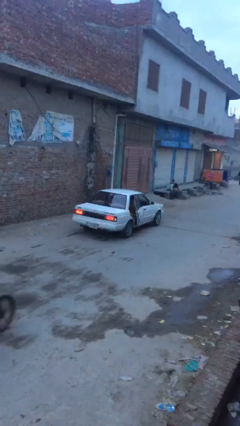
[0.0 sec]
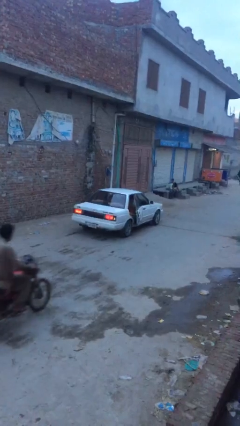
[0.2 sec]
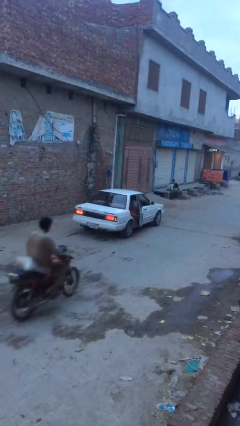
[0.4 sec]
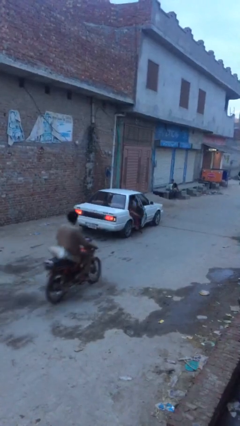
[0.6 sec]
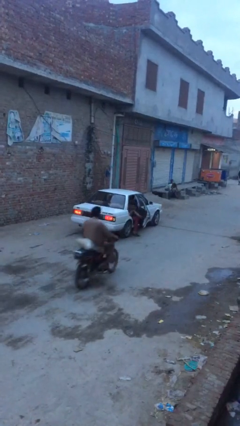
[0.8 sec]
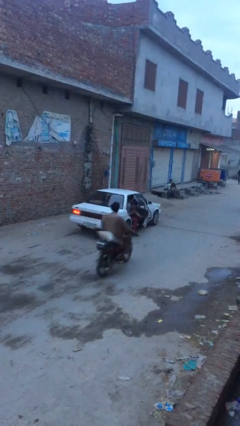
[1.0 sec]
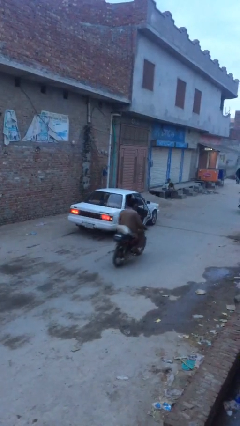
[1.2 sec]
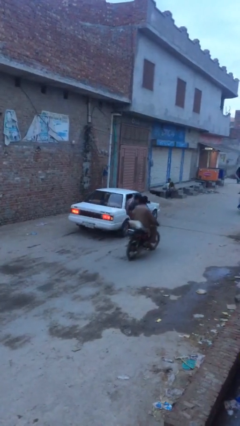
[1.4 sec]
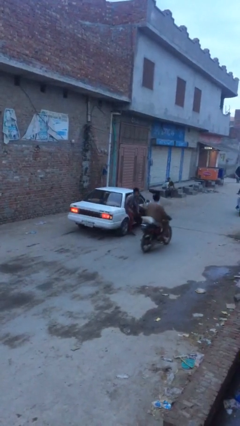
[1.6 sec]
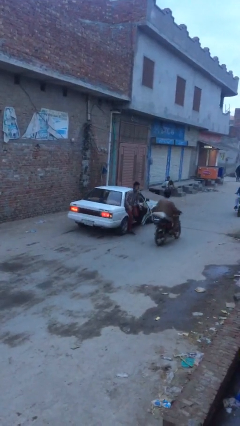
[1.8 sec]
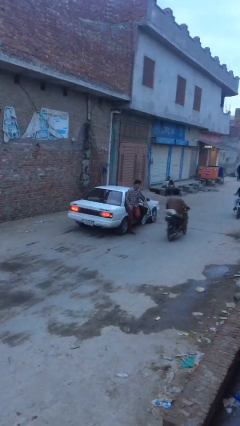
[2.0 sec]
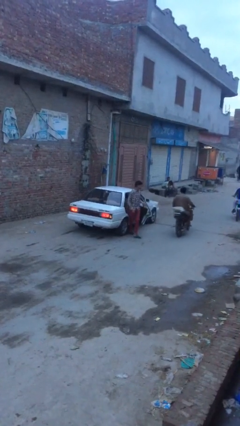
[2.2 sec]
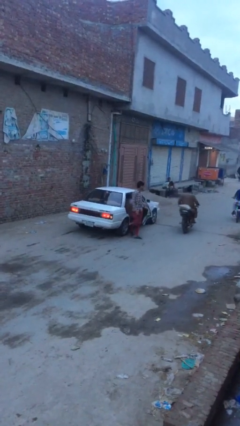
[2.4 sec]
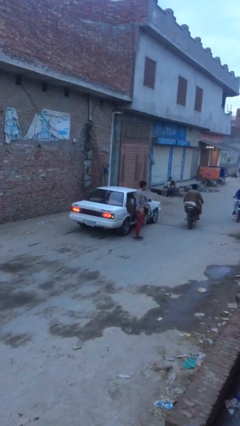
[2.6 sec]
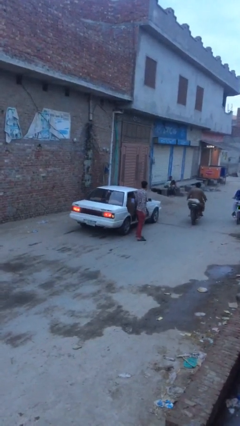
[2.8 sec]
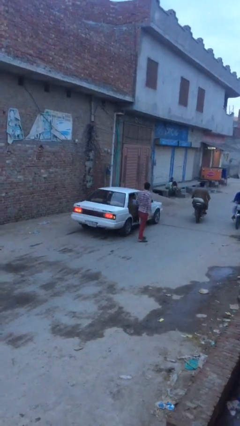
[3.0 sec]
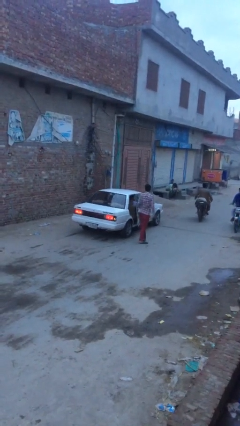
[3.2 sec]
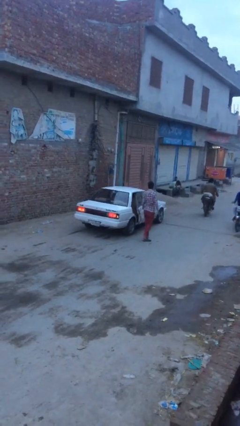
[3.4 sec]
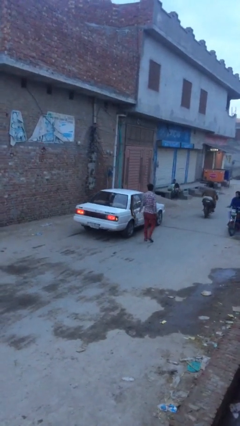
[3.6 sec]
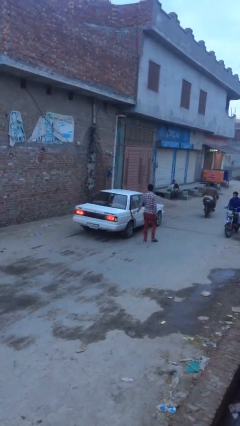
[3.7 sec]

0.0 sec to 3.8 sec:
car drops off person

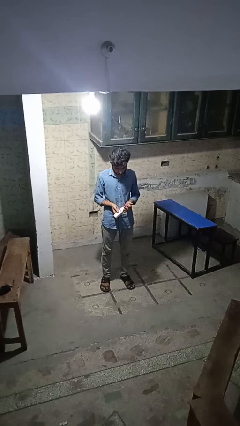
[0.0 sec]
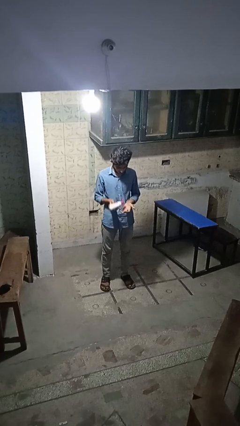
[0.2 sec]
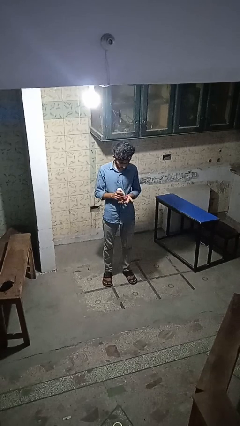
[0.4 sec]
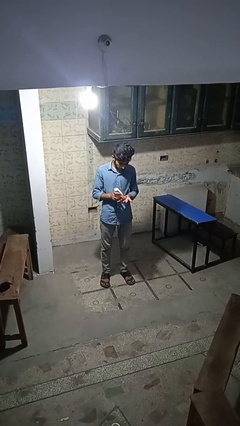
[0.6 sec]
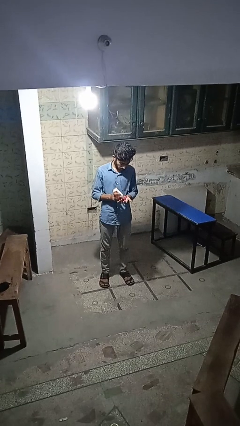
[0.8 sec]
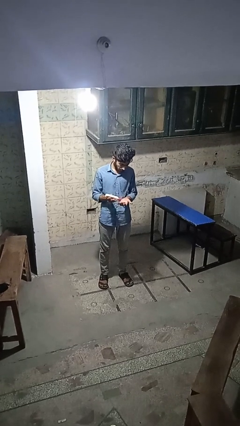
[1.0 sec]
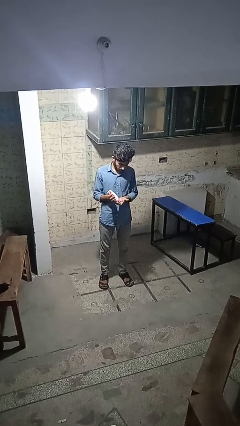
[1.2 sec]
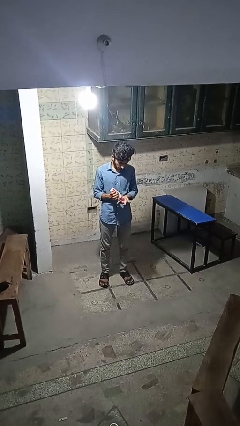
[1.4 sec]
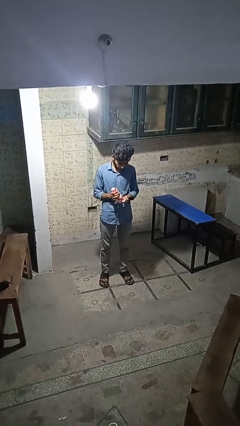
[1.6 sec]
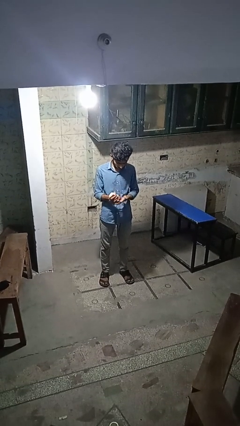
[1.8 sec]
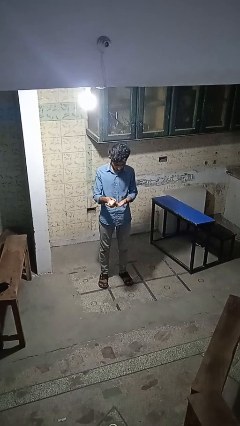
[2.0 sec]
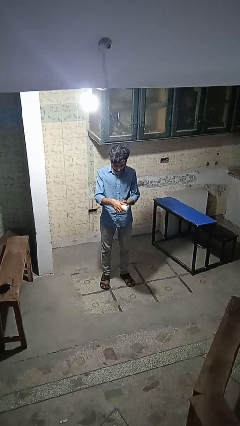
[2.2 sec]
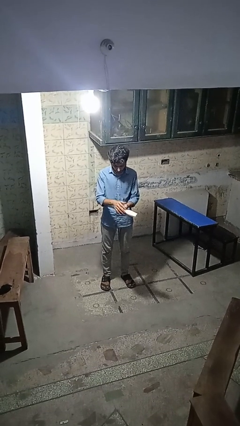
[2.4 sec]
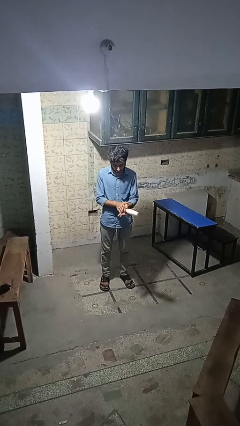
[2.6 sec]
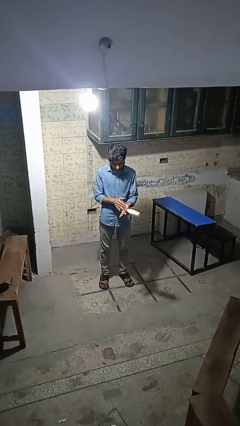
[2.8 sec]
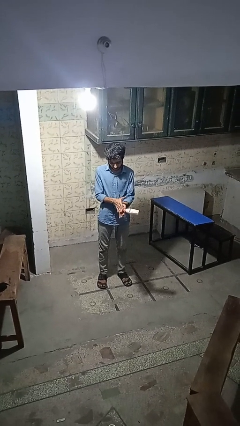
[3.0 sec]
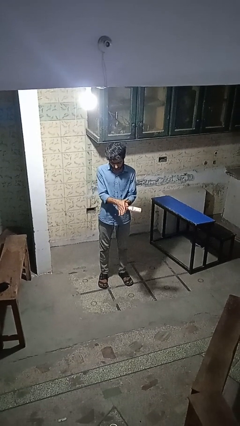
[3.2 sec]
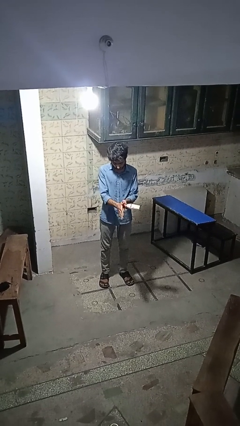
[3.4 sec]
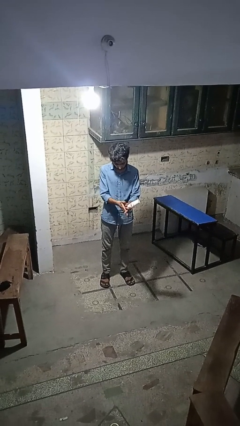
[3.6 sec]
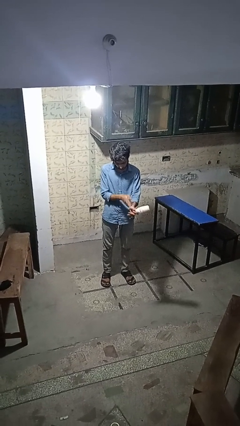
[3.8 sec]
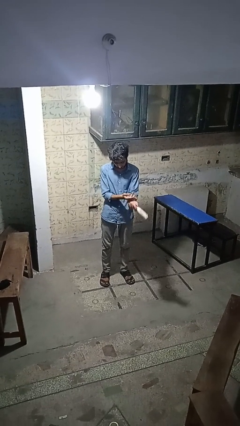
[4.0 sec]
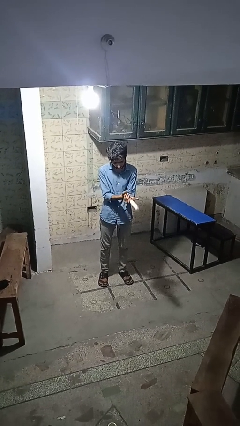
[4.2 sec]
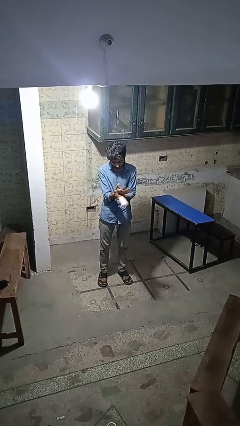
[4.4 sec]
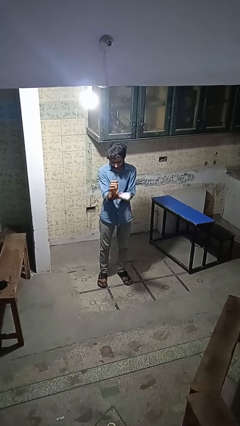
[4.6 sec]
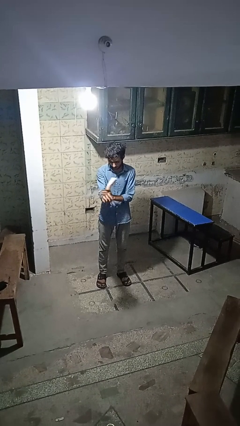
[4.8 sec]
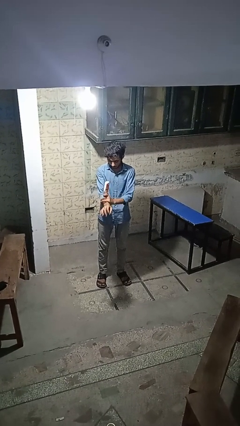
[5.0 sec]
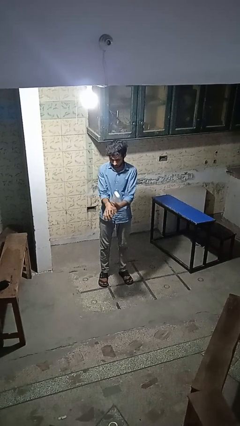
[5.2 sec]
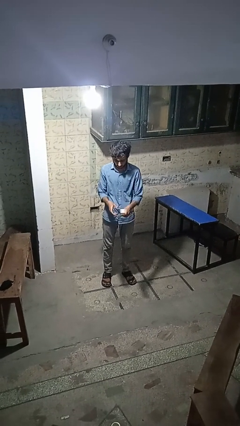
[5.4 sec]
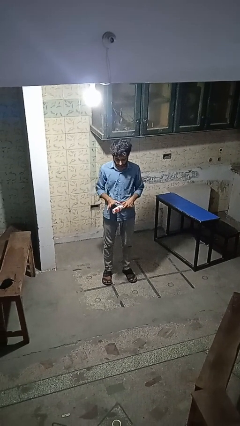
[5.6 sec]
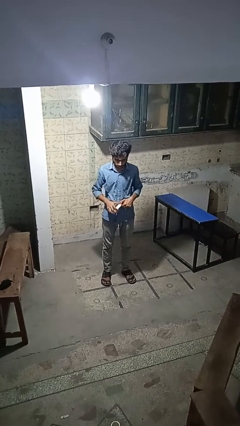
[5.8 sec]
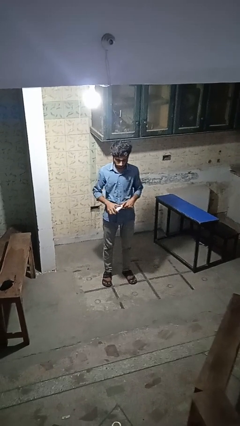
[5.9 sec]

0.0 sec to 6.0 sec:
person applies sunscreen

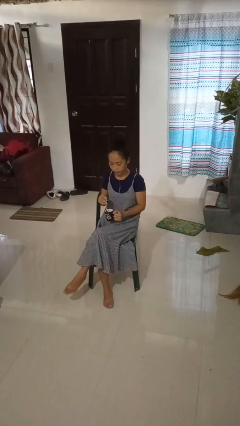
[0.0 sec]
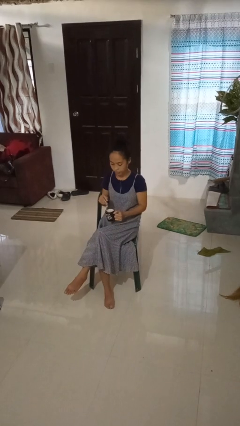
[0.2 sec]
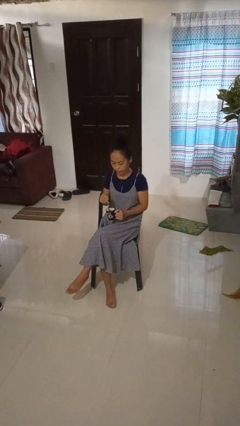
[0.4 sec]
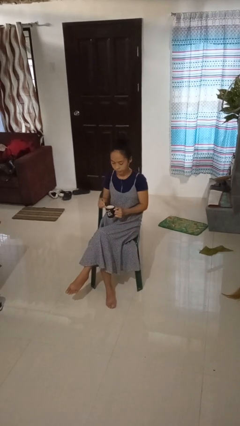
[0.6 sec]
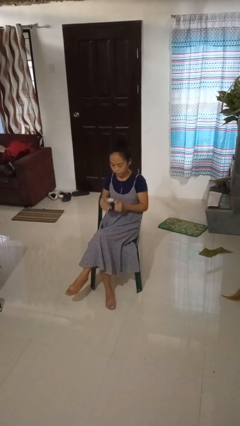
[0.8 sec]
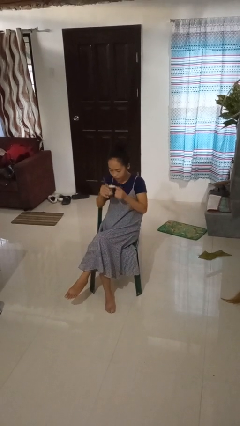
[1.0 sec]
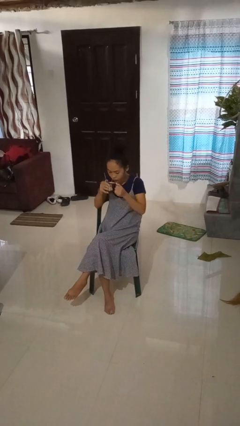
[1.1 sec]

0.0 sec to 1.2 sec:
person stirs mug

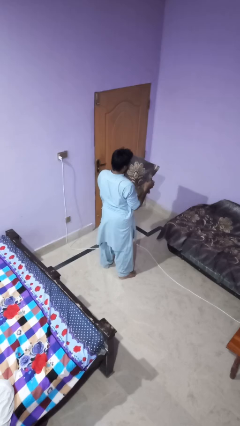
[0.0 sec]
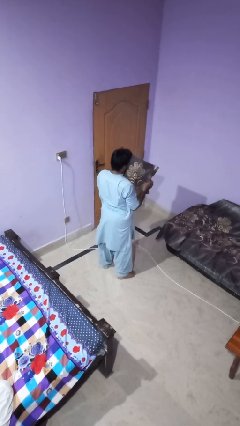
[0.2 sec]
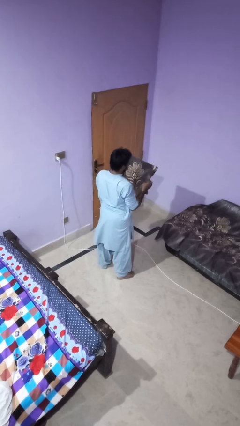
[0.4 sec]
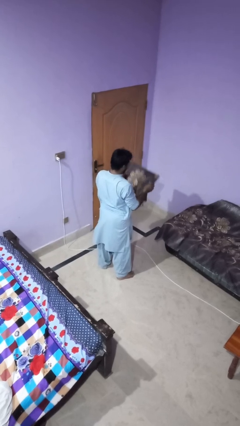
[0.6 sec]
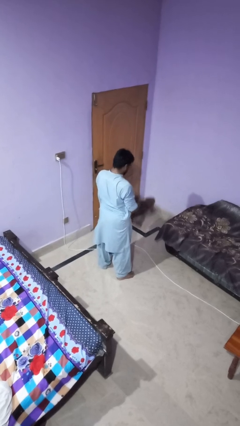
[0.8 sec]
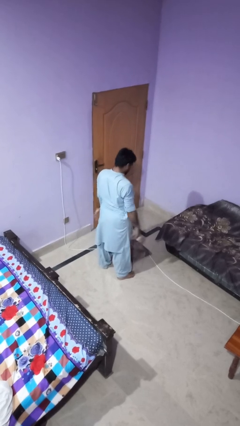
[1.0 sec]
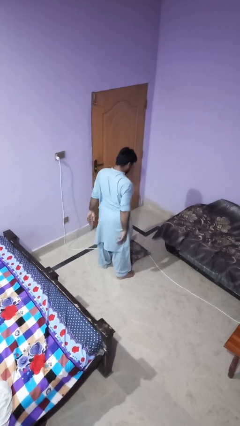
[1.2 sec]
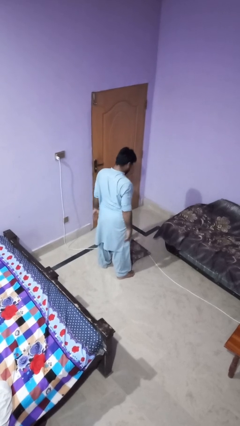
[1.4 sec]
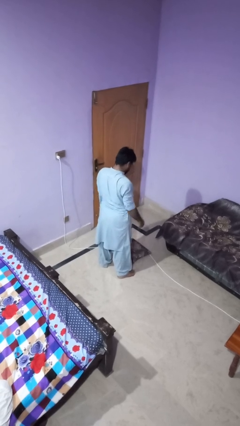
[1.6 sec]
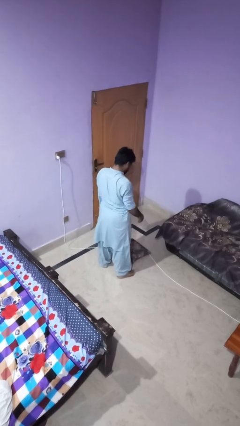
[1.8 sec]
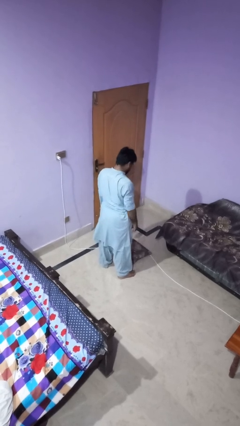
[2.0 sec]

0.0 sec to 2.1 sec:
person drops object

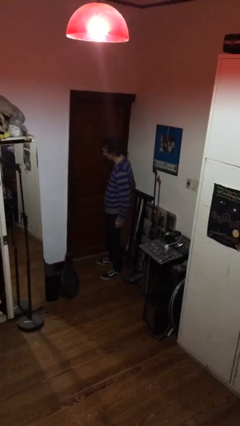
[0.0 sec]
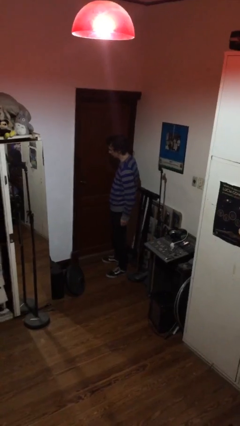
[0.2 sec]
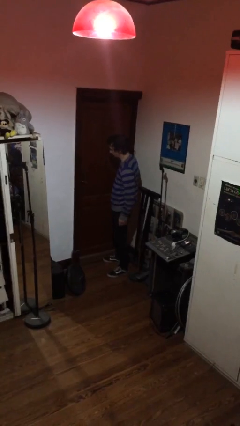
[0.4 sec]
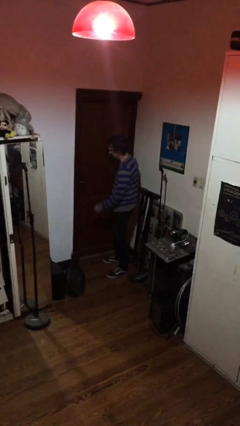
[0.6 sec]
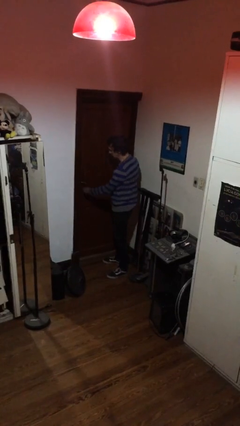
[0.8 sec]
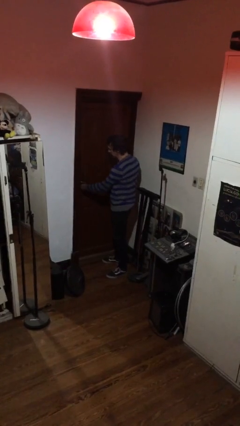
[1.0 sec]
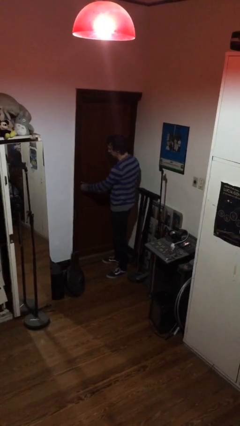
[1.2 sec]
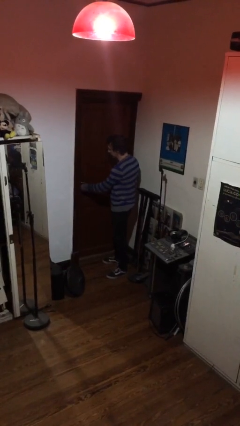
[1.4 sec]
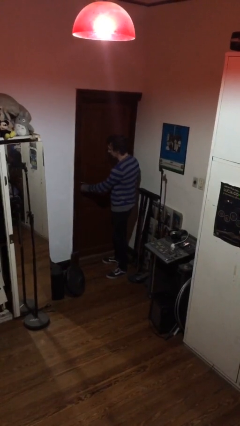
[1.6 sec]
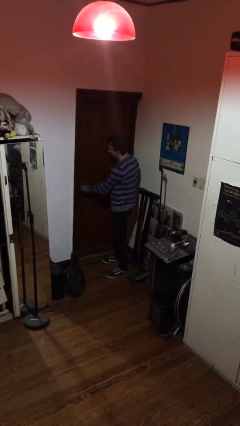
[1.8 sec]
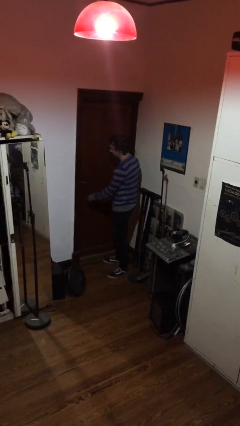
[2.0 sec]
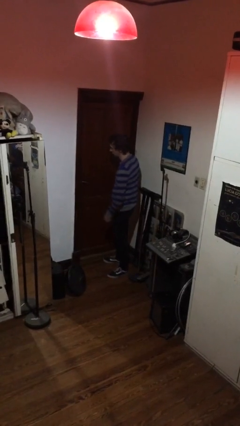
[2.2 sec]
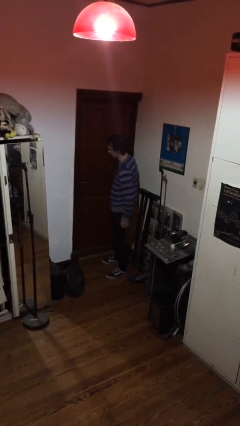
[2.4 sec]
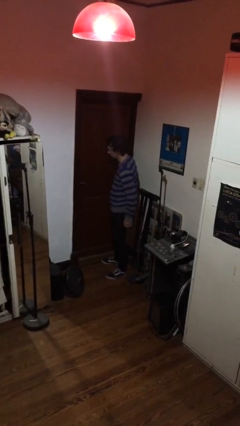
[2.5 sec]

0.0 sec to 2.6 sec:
person unlocks door with keys

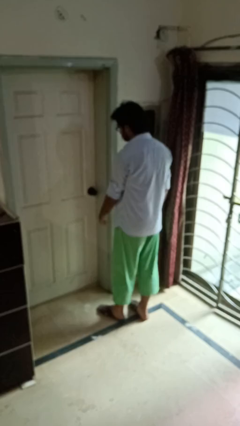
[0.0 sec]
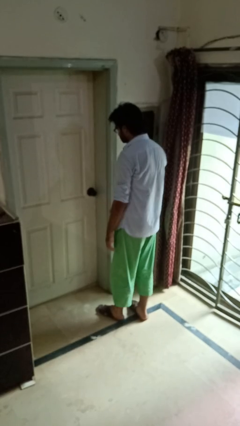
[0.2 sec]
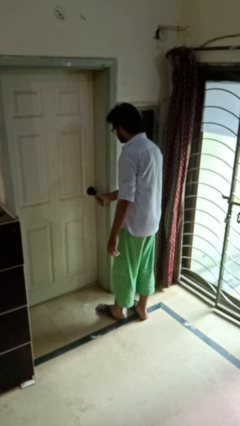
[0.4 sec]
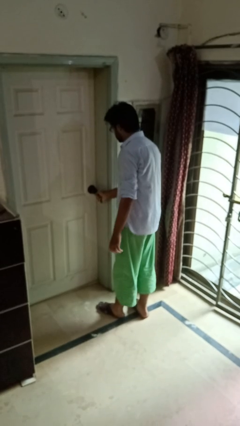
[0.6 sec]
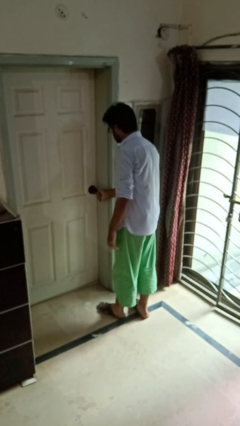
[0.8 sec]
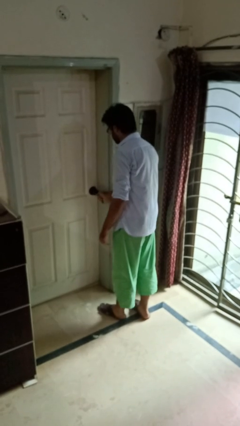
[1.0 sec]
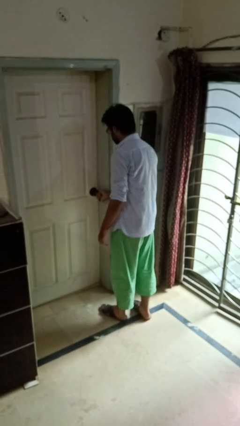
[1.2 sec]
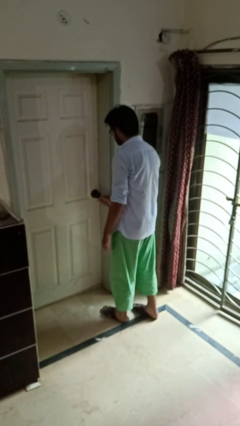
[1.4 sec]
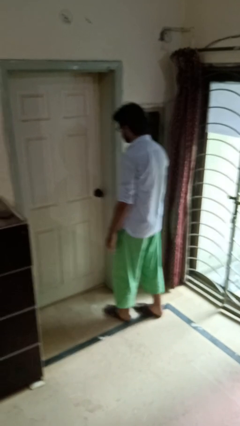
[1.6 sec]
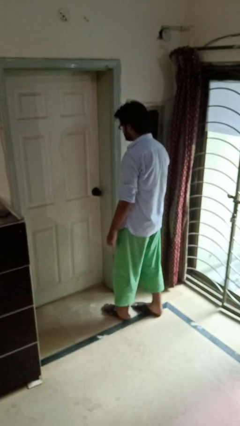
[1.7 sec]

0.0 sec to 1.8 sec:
person locks door with keys
